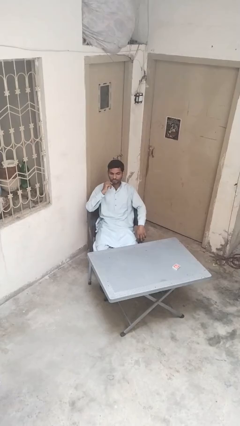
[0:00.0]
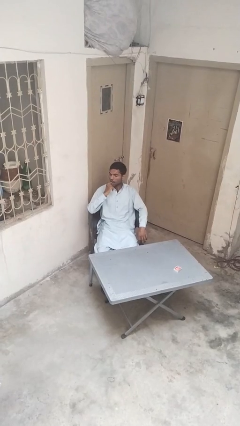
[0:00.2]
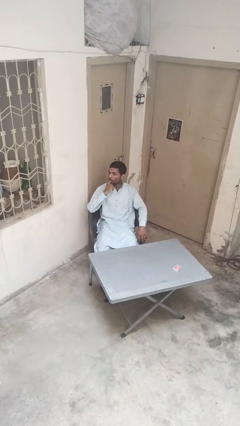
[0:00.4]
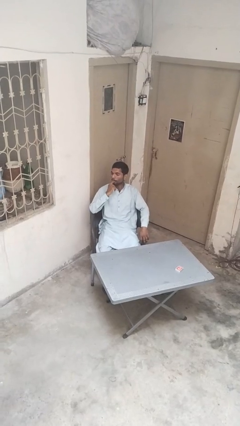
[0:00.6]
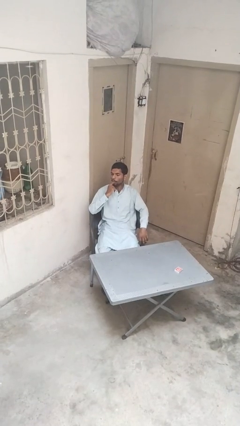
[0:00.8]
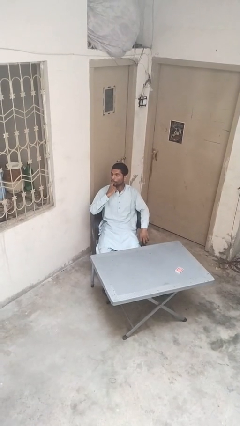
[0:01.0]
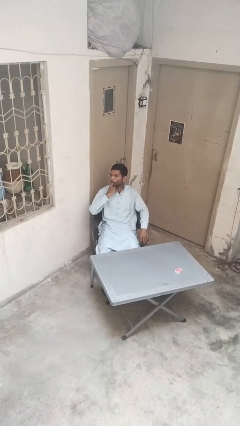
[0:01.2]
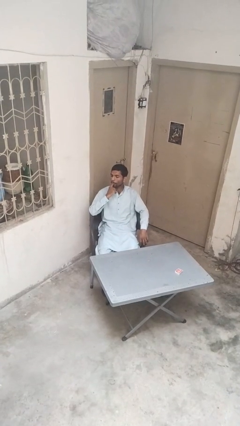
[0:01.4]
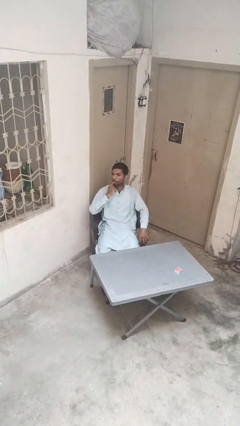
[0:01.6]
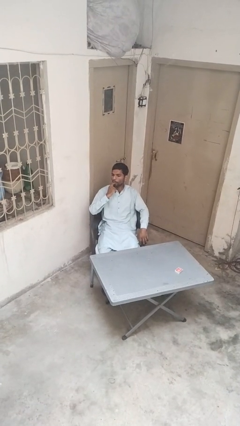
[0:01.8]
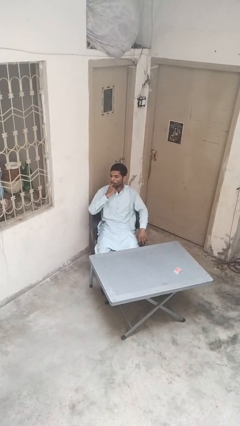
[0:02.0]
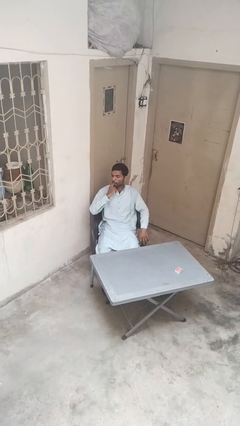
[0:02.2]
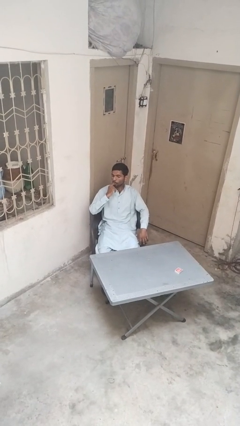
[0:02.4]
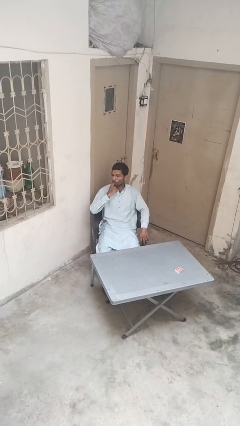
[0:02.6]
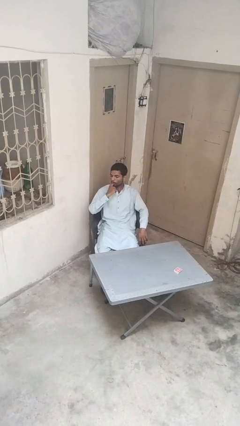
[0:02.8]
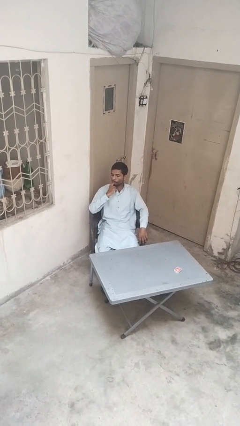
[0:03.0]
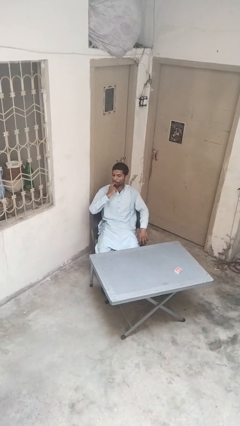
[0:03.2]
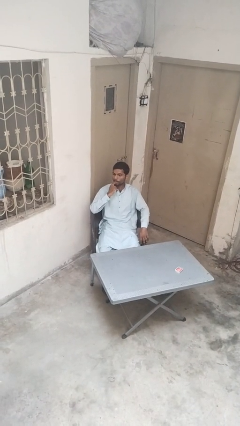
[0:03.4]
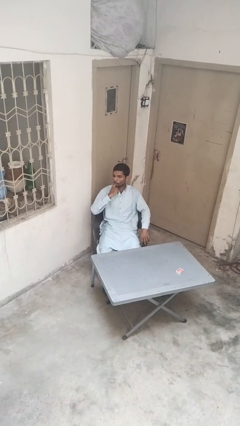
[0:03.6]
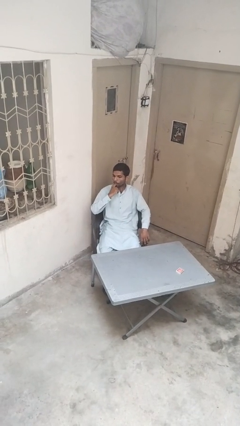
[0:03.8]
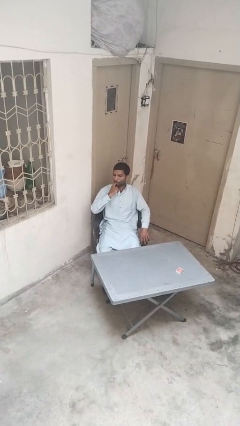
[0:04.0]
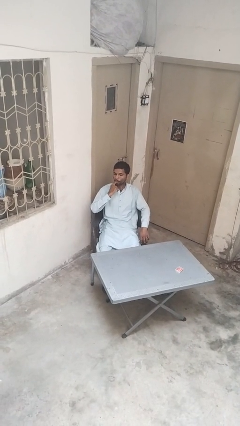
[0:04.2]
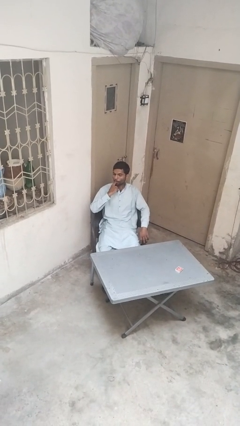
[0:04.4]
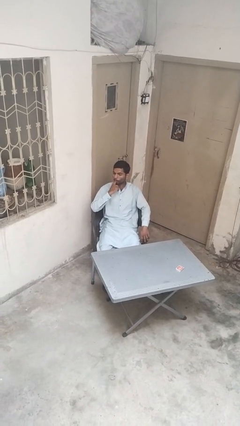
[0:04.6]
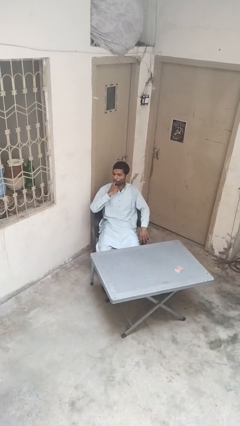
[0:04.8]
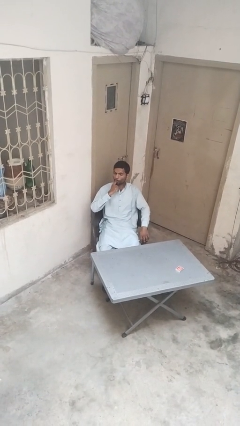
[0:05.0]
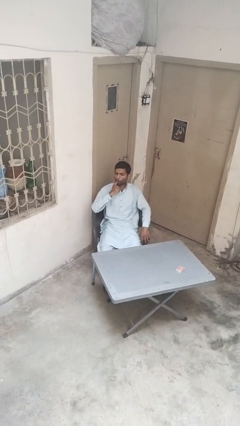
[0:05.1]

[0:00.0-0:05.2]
person licks fingers

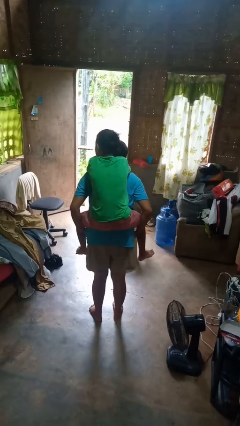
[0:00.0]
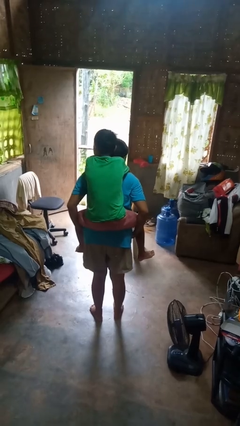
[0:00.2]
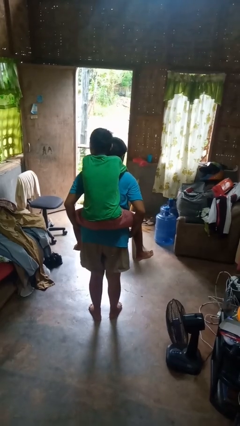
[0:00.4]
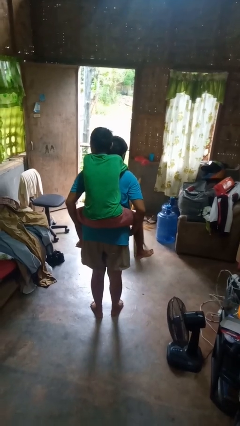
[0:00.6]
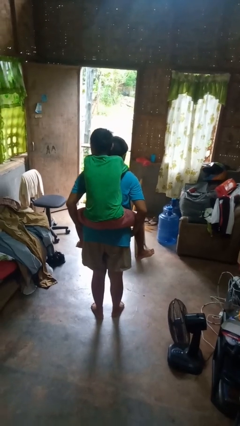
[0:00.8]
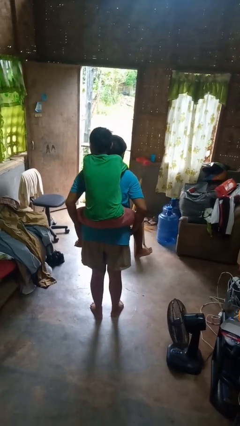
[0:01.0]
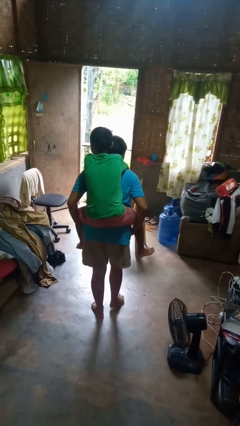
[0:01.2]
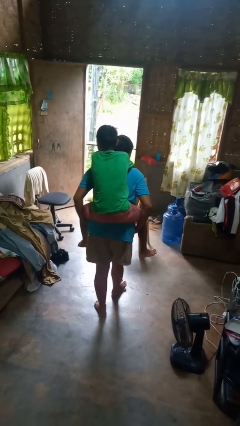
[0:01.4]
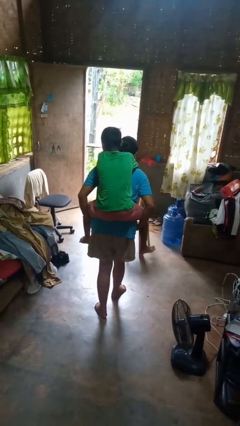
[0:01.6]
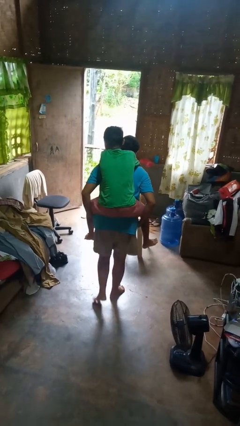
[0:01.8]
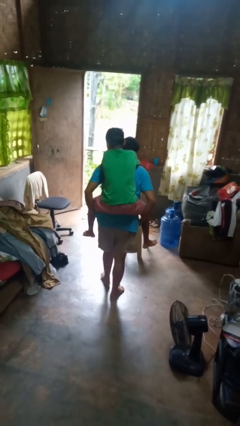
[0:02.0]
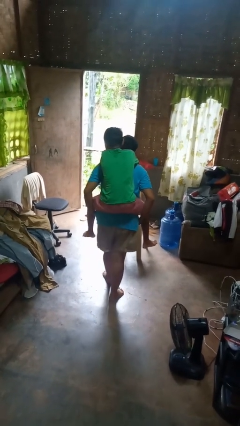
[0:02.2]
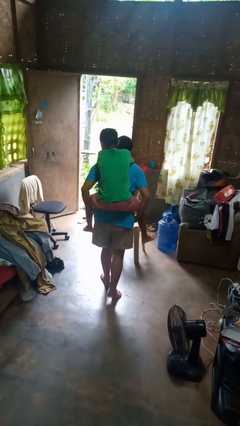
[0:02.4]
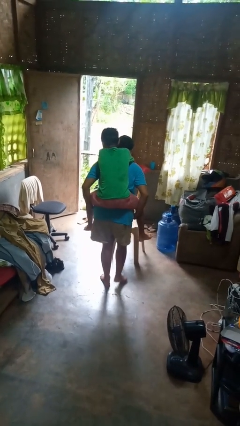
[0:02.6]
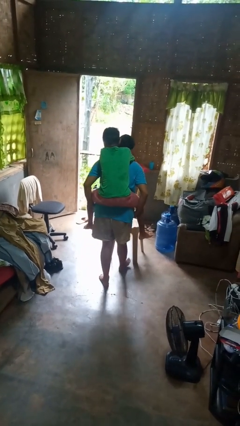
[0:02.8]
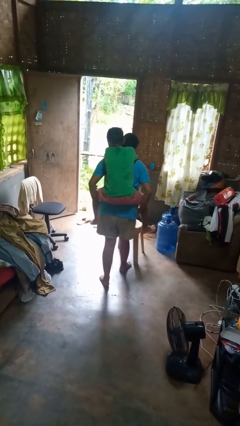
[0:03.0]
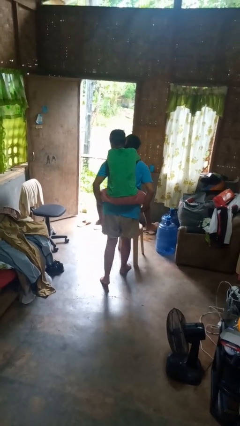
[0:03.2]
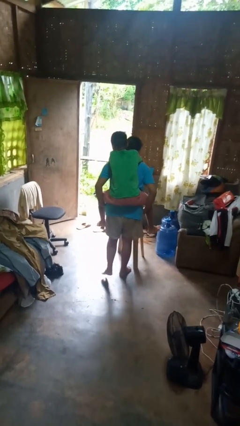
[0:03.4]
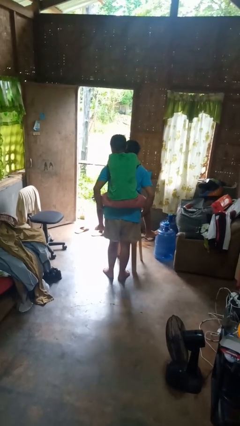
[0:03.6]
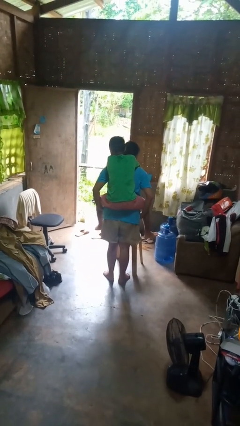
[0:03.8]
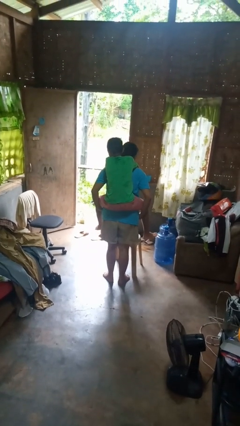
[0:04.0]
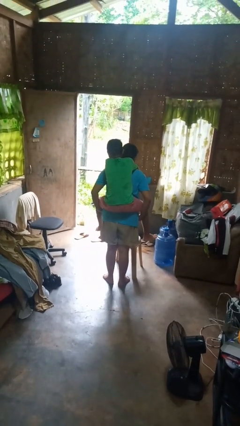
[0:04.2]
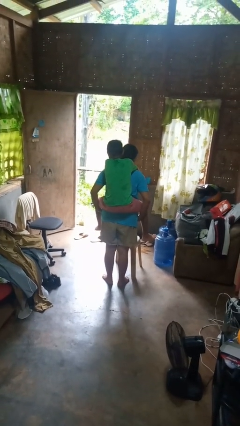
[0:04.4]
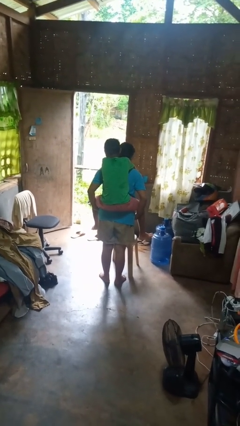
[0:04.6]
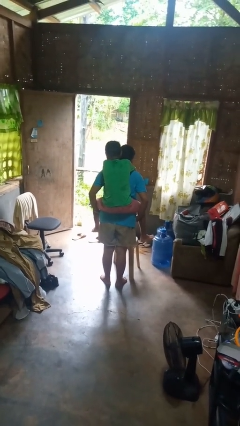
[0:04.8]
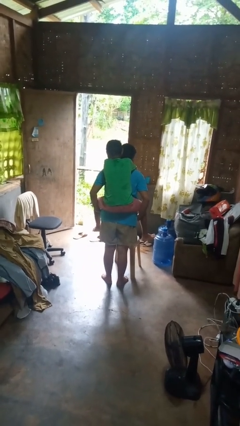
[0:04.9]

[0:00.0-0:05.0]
person carries person on back

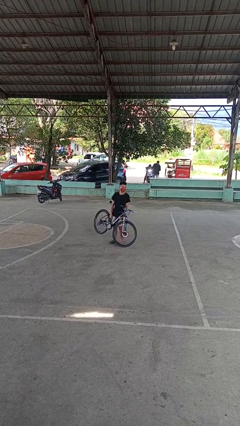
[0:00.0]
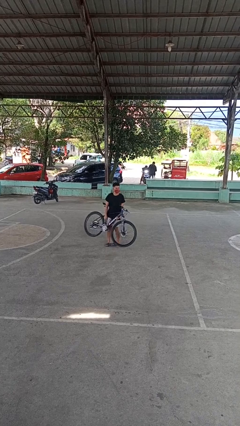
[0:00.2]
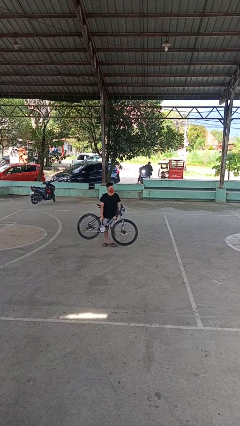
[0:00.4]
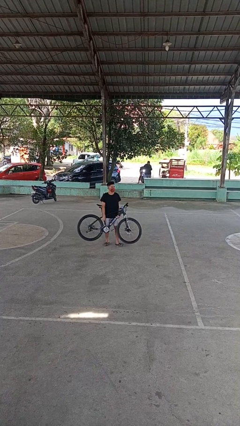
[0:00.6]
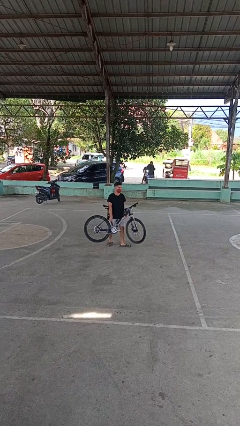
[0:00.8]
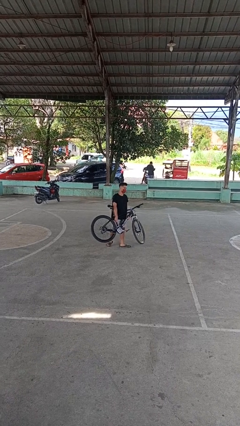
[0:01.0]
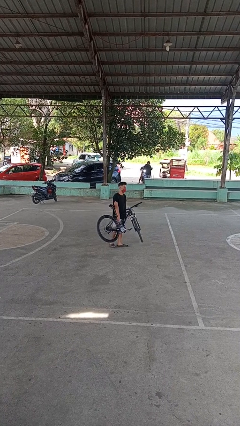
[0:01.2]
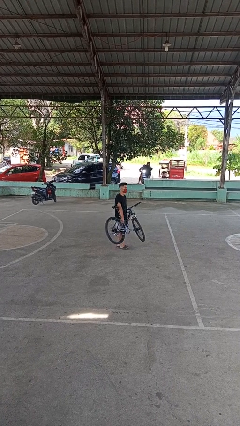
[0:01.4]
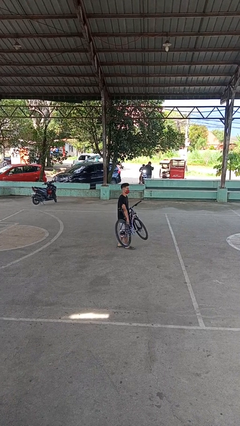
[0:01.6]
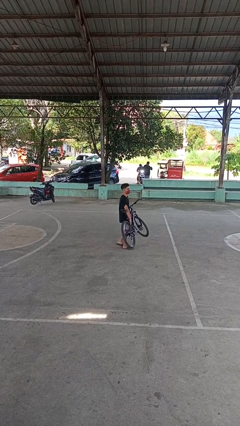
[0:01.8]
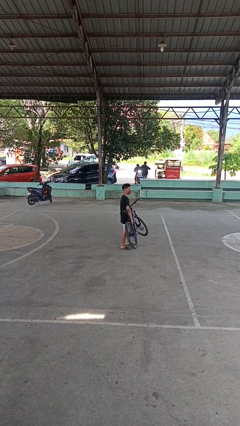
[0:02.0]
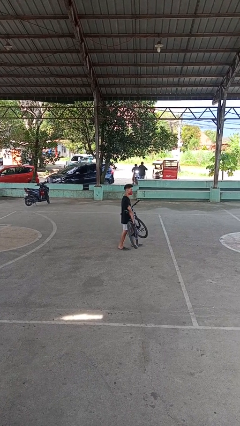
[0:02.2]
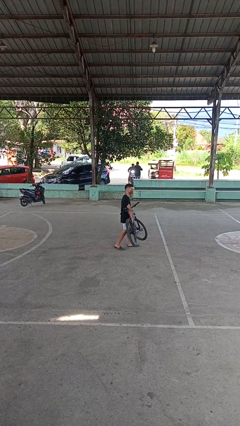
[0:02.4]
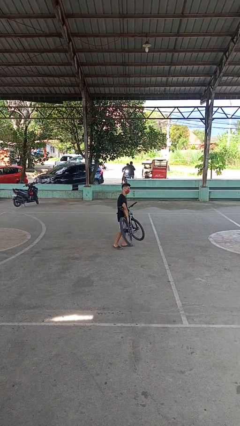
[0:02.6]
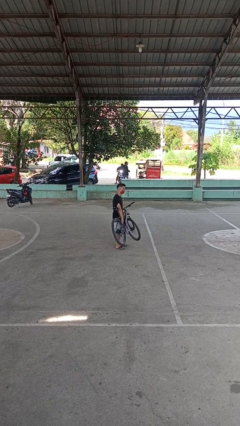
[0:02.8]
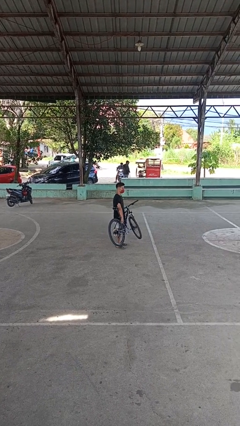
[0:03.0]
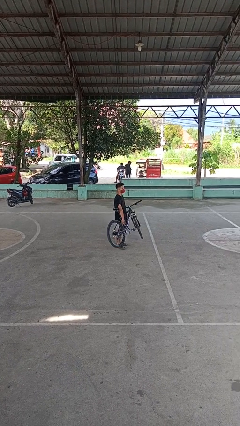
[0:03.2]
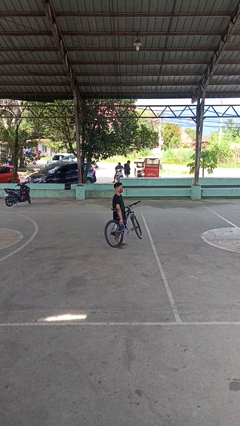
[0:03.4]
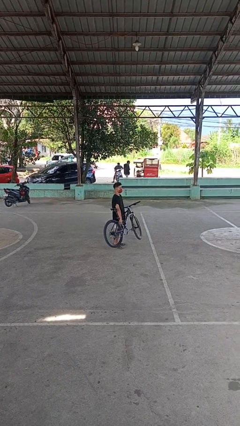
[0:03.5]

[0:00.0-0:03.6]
person carries bicycle

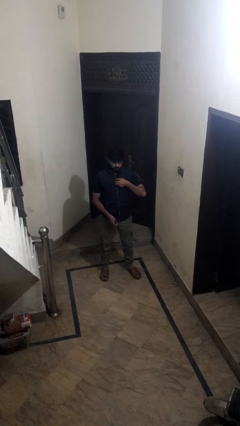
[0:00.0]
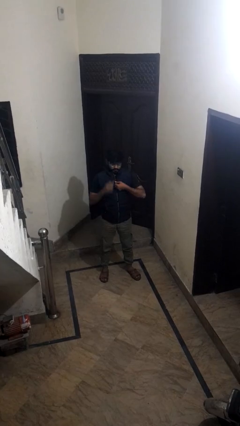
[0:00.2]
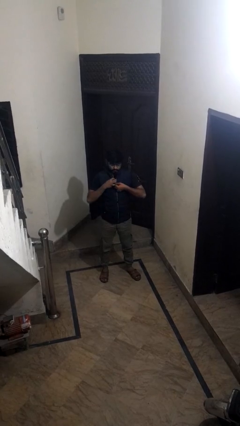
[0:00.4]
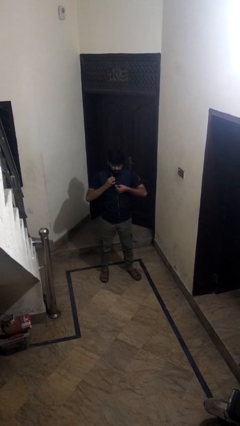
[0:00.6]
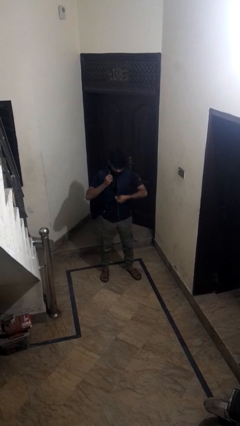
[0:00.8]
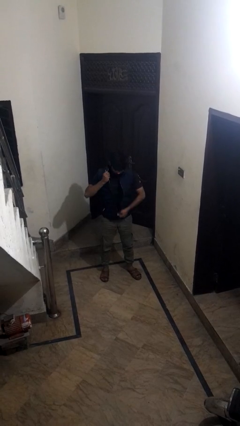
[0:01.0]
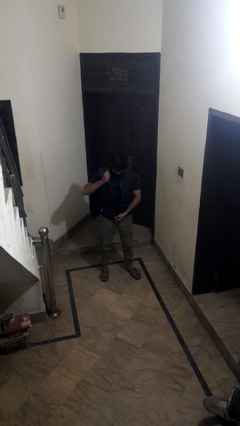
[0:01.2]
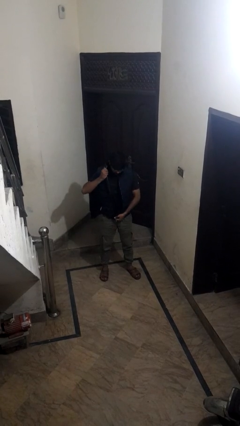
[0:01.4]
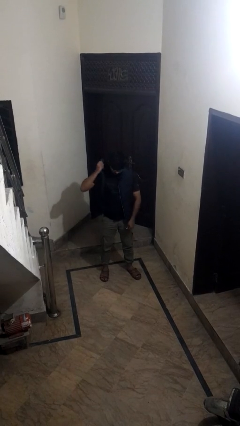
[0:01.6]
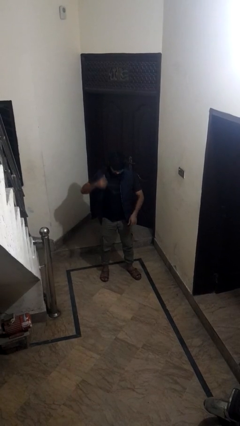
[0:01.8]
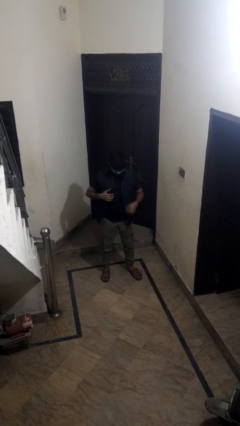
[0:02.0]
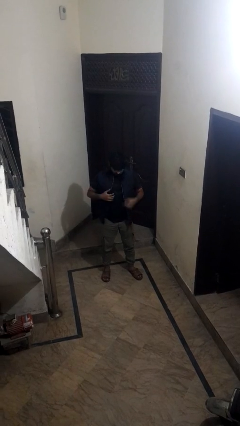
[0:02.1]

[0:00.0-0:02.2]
person unzips jacket

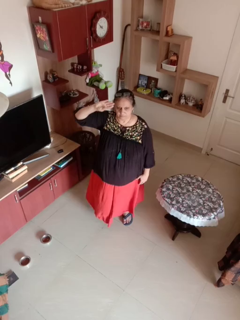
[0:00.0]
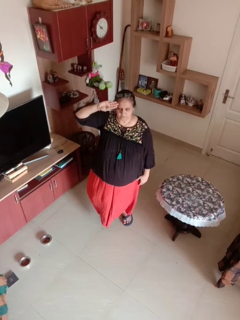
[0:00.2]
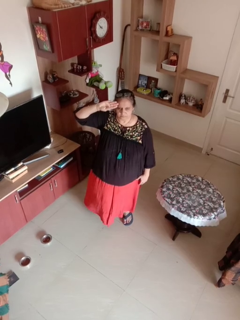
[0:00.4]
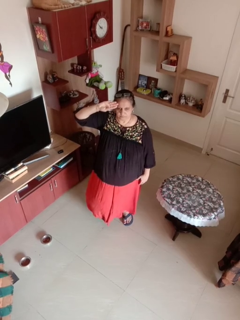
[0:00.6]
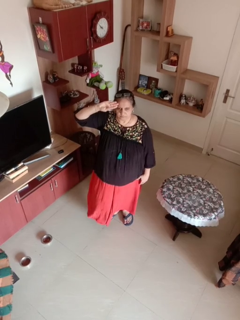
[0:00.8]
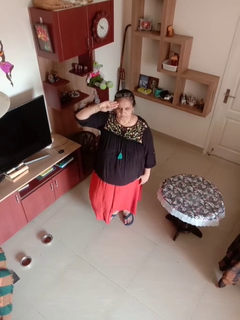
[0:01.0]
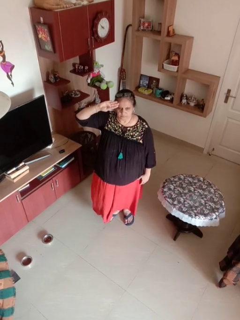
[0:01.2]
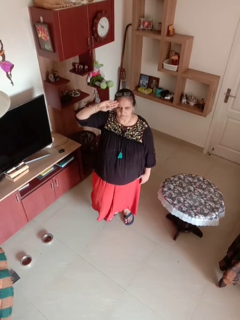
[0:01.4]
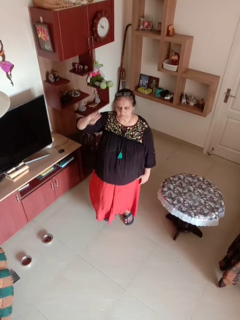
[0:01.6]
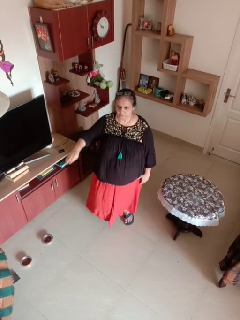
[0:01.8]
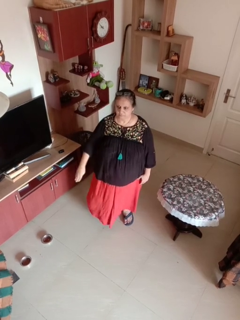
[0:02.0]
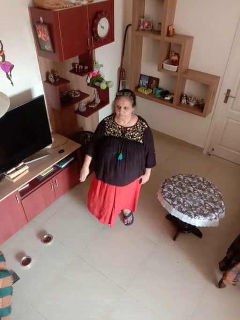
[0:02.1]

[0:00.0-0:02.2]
person salutes

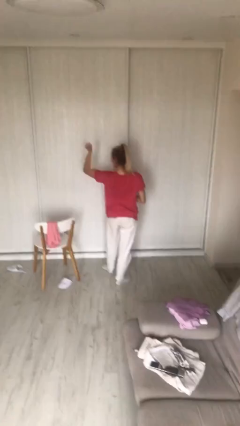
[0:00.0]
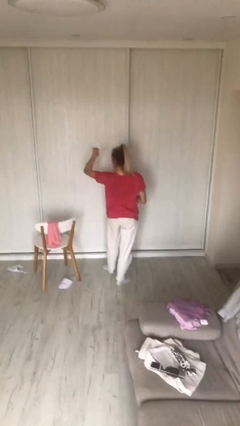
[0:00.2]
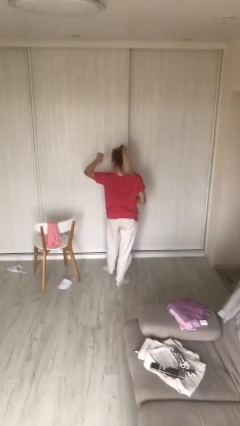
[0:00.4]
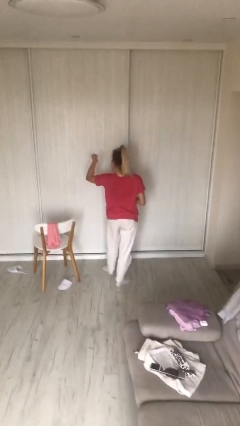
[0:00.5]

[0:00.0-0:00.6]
person gestures behind me
